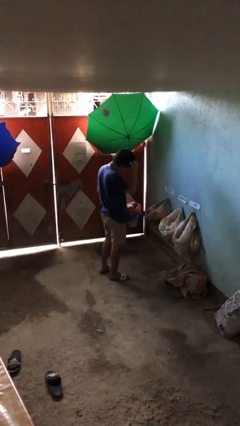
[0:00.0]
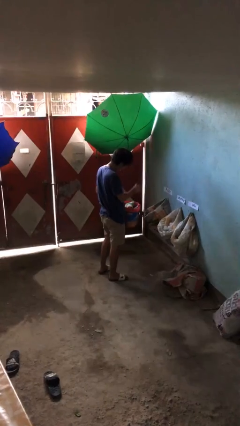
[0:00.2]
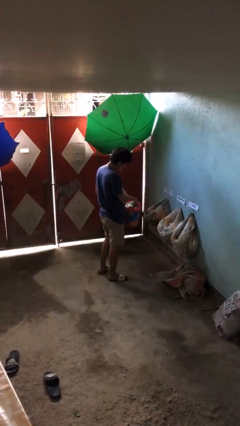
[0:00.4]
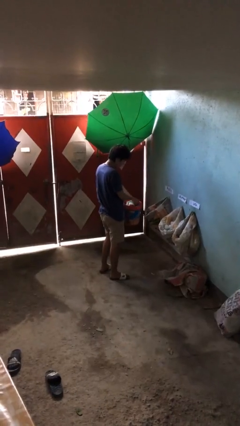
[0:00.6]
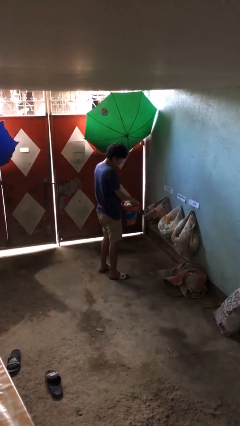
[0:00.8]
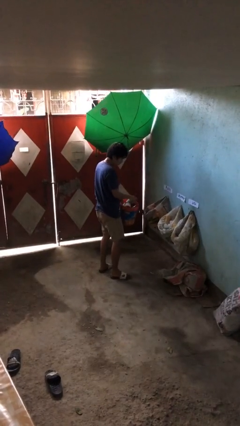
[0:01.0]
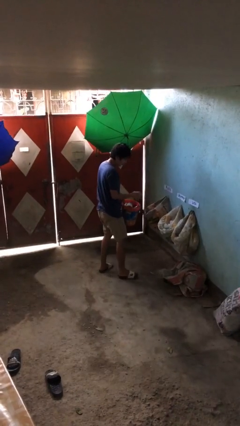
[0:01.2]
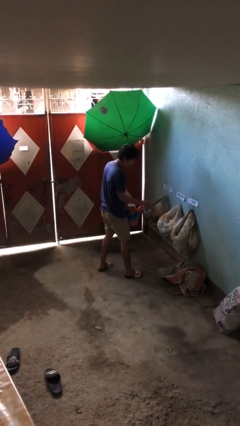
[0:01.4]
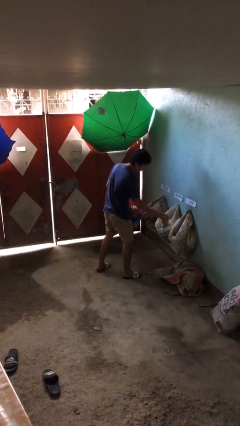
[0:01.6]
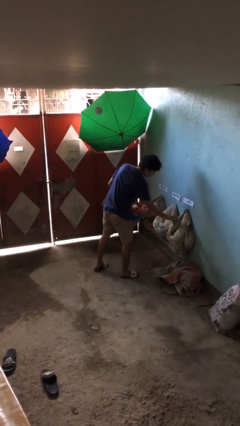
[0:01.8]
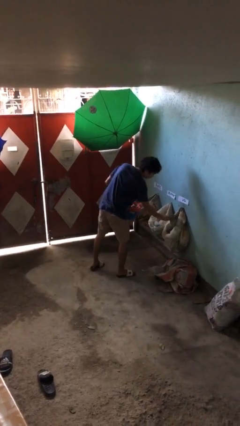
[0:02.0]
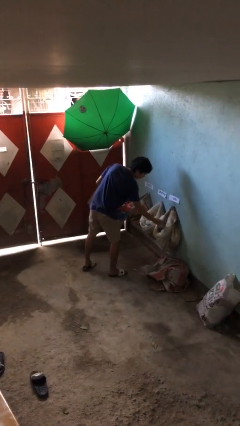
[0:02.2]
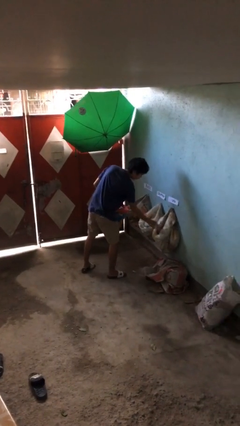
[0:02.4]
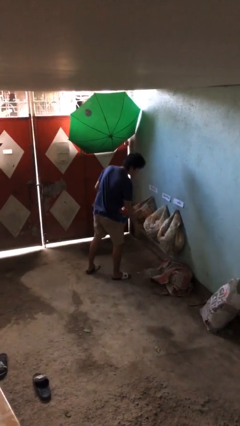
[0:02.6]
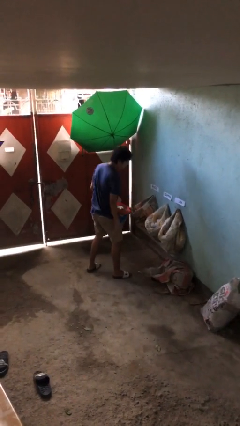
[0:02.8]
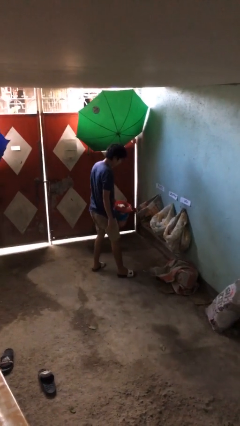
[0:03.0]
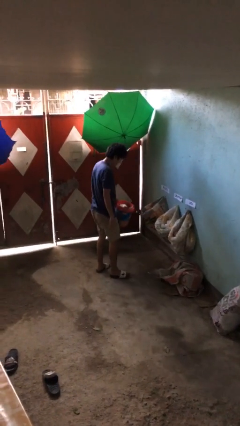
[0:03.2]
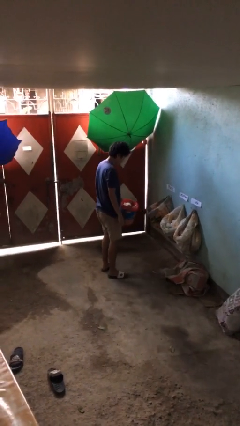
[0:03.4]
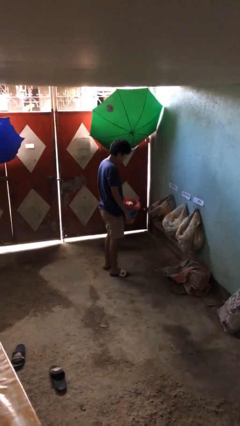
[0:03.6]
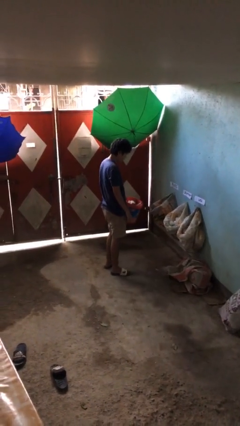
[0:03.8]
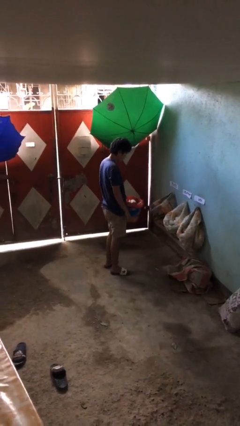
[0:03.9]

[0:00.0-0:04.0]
person discards trash

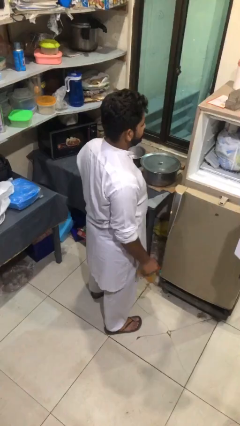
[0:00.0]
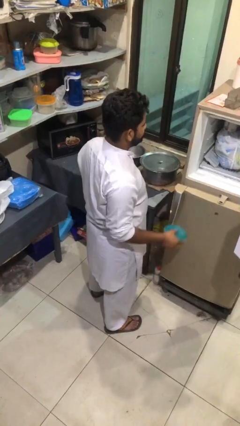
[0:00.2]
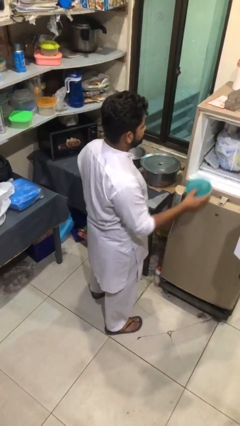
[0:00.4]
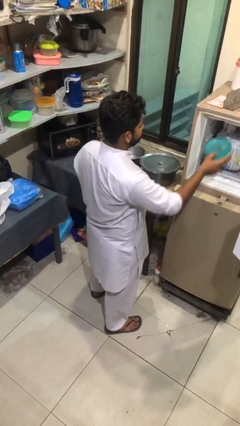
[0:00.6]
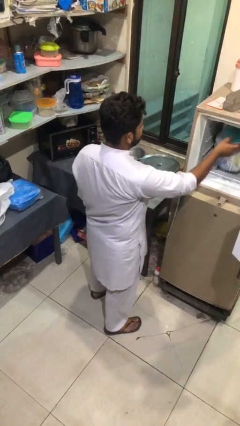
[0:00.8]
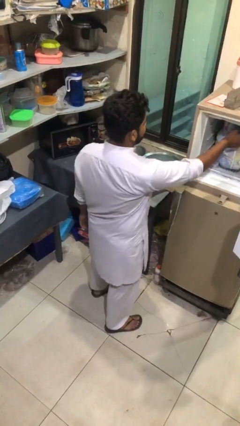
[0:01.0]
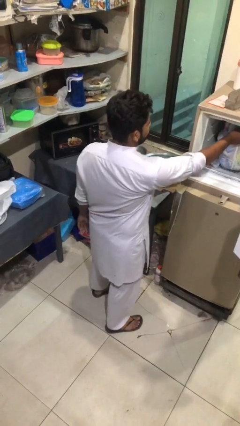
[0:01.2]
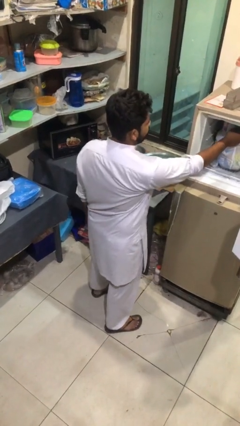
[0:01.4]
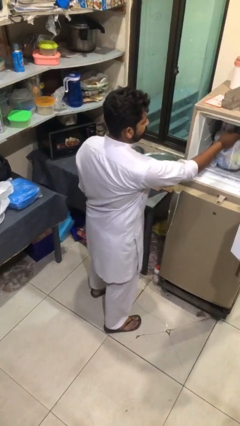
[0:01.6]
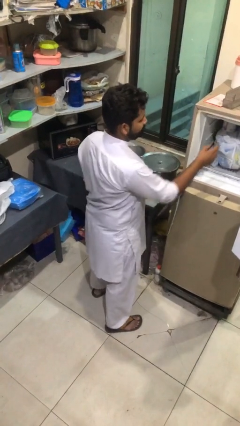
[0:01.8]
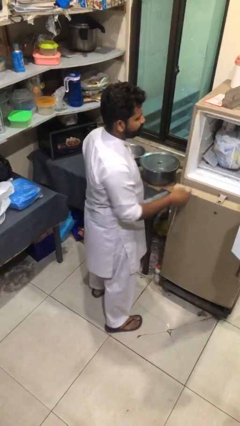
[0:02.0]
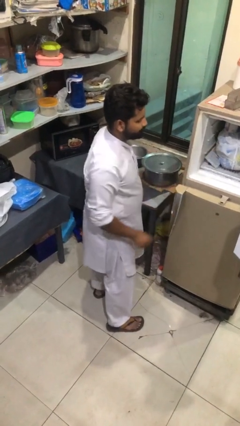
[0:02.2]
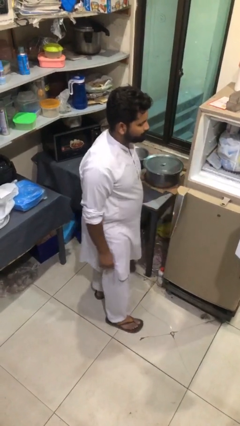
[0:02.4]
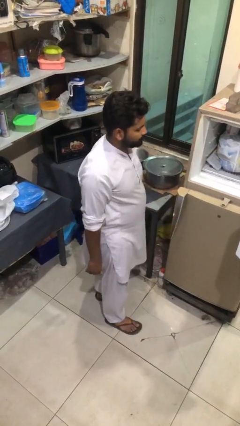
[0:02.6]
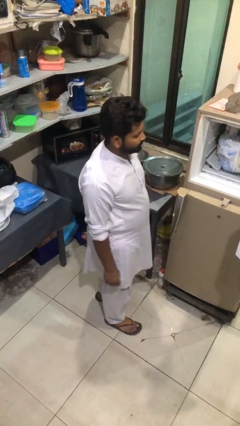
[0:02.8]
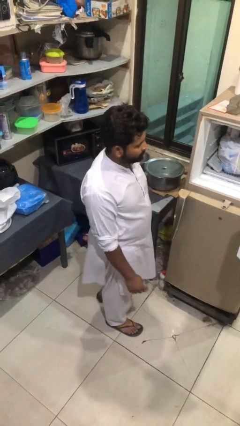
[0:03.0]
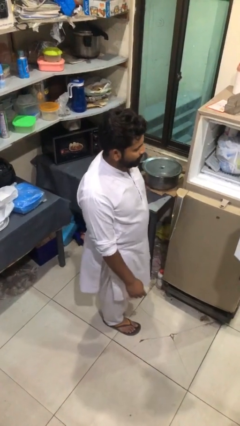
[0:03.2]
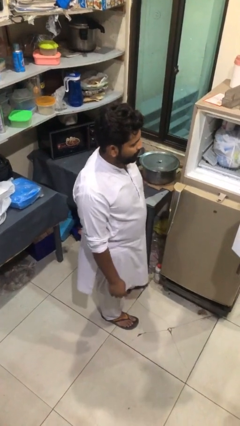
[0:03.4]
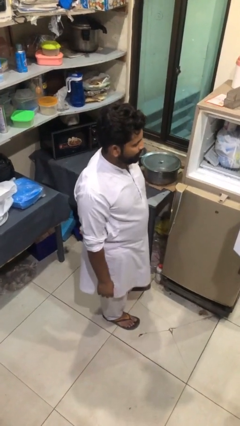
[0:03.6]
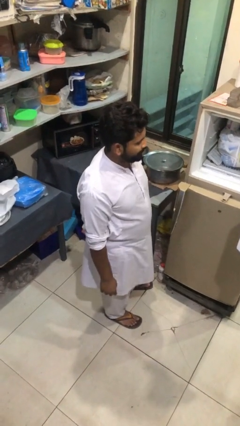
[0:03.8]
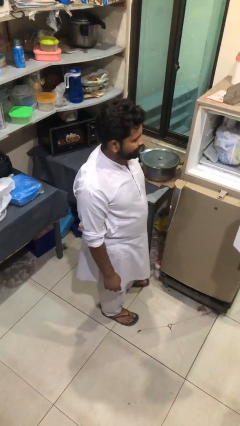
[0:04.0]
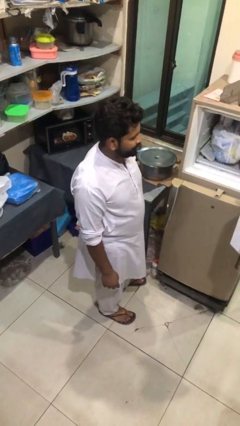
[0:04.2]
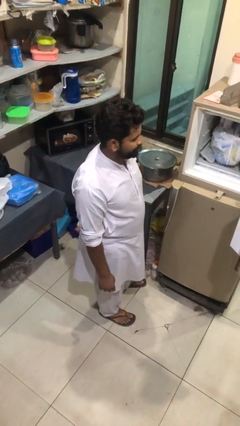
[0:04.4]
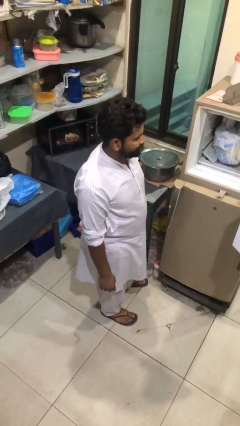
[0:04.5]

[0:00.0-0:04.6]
person puts object into refrigerator

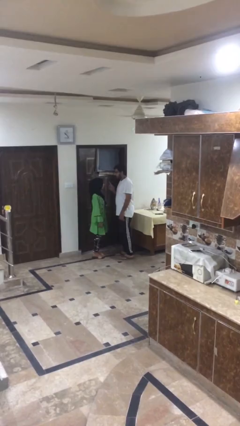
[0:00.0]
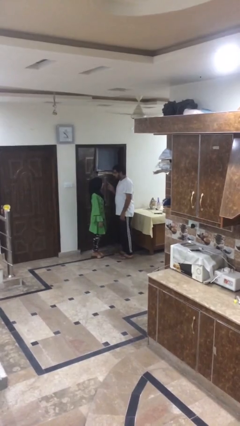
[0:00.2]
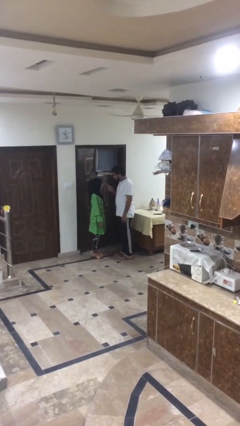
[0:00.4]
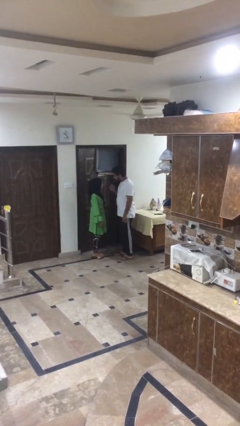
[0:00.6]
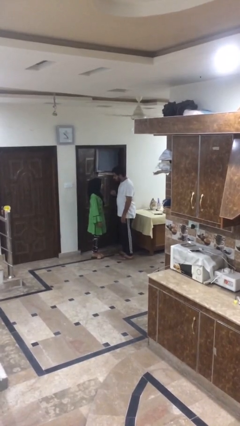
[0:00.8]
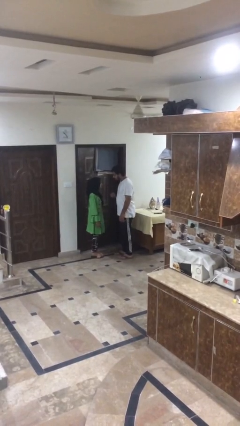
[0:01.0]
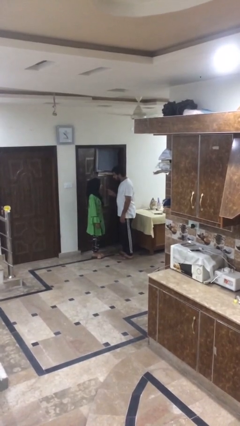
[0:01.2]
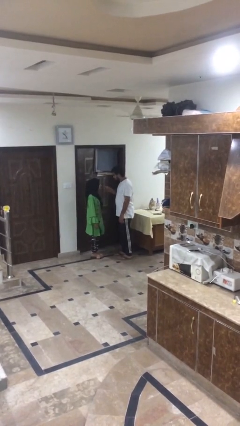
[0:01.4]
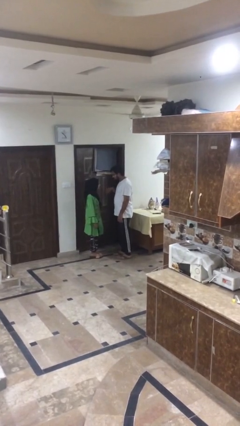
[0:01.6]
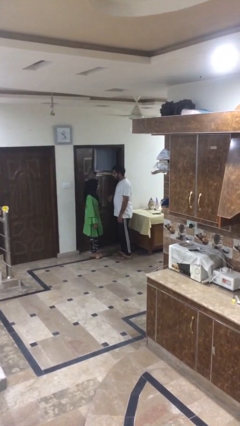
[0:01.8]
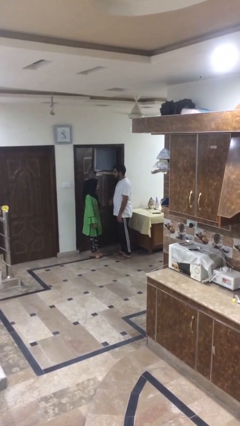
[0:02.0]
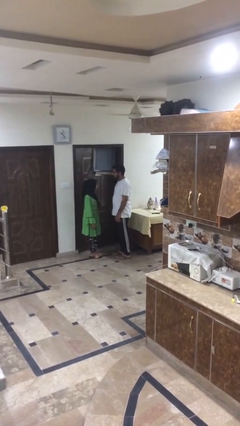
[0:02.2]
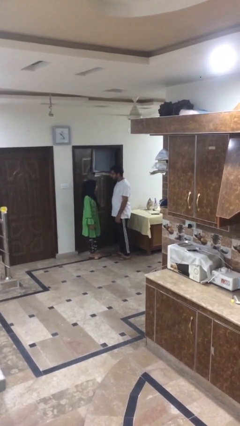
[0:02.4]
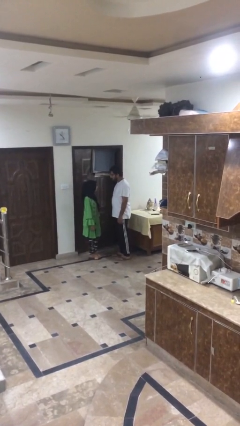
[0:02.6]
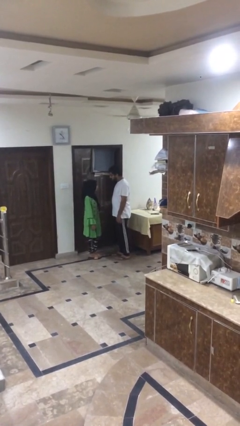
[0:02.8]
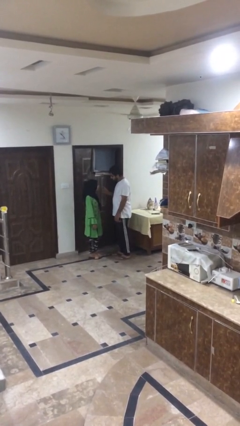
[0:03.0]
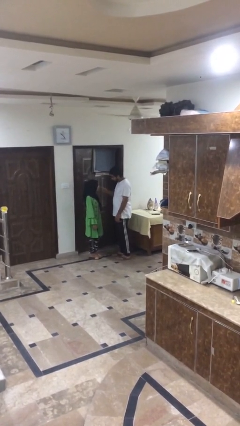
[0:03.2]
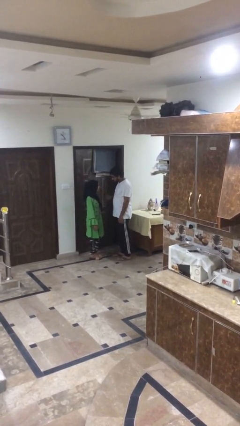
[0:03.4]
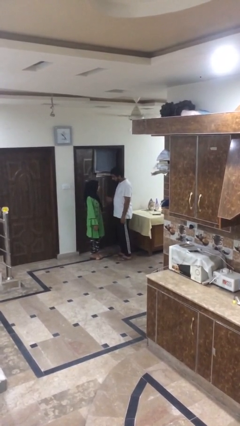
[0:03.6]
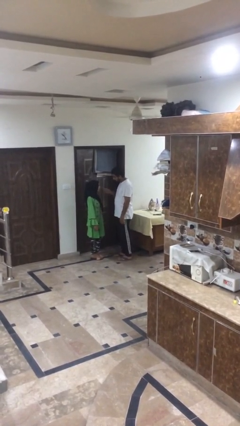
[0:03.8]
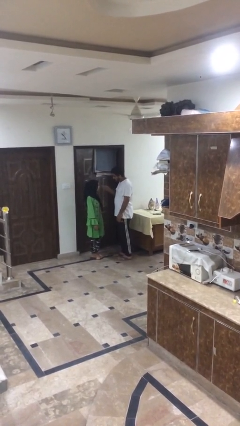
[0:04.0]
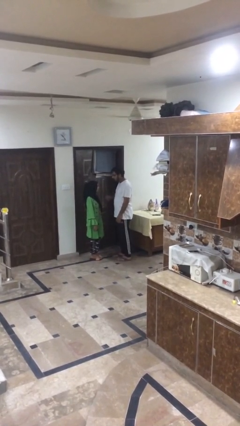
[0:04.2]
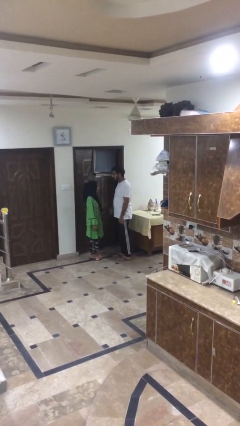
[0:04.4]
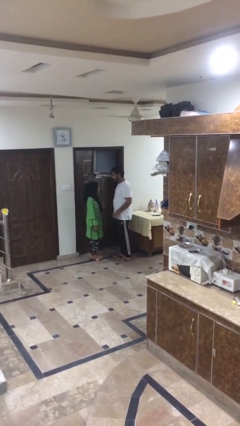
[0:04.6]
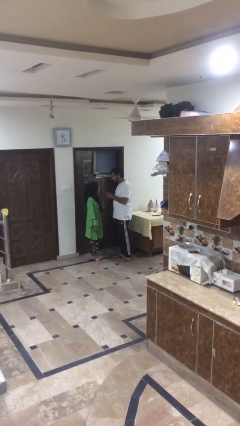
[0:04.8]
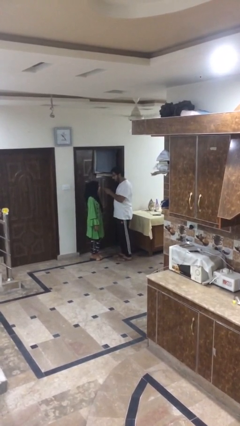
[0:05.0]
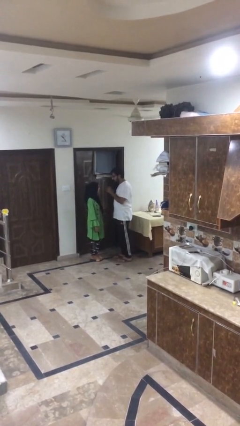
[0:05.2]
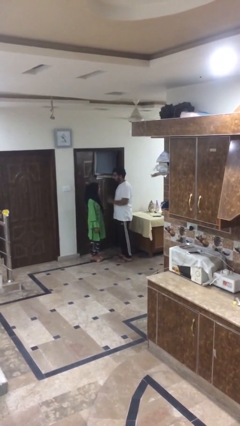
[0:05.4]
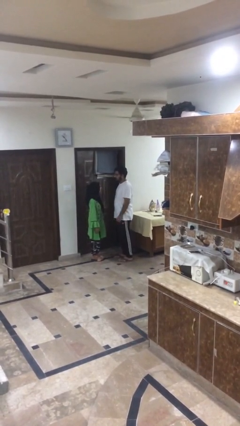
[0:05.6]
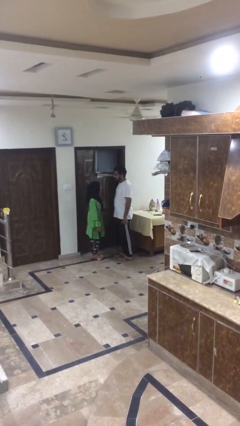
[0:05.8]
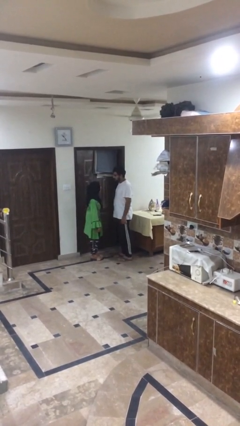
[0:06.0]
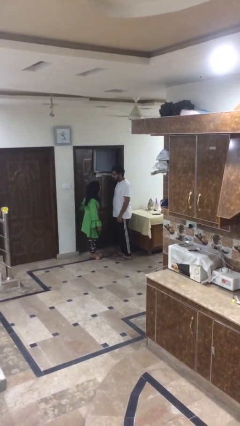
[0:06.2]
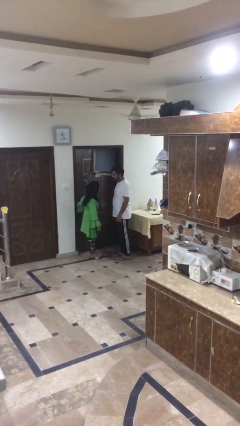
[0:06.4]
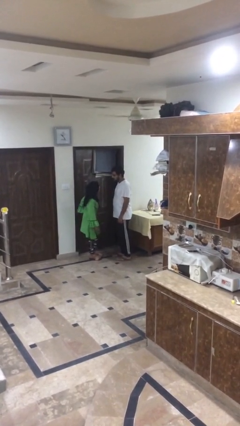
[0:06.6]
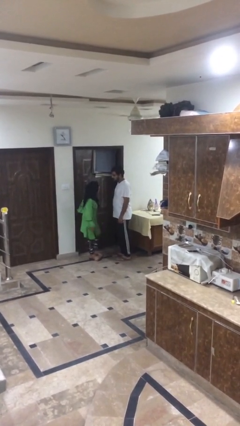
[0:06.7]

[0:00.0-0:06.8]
person talks to person

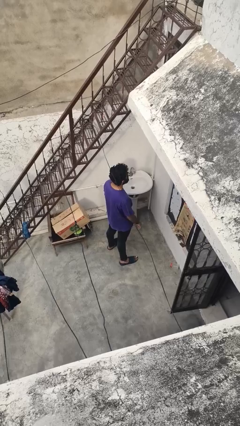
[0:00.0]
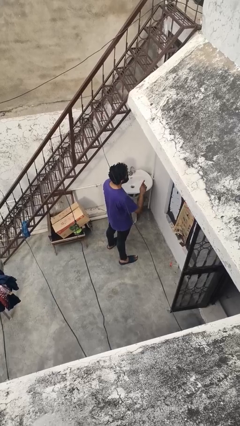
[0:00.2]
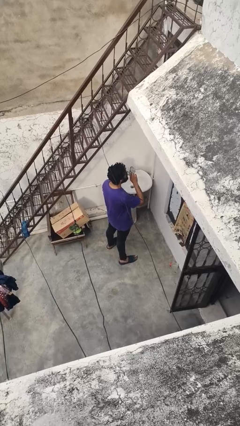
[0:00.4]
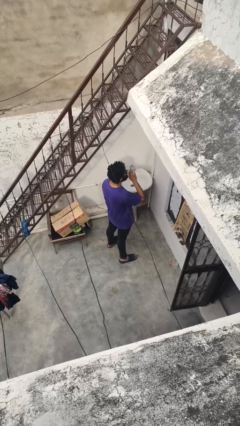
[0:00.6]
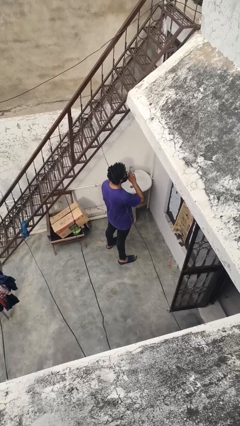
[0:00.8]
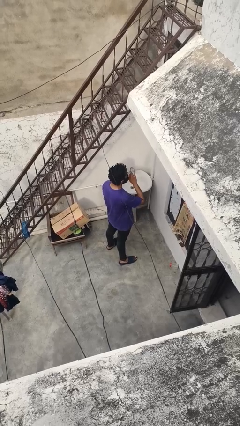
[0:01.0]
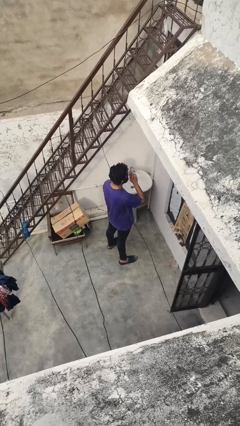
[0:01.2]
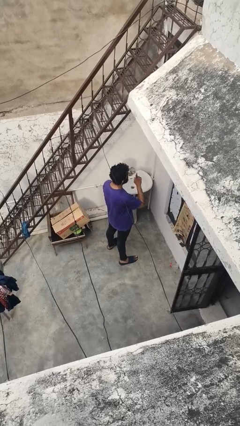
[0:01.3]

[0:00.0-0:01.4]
person gestures be quiet

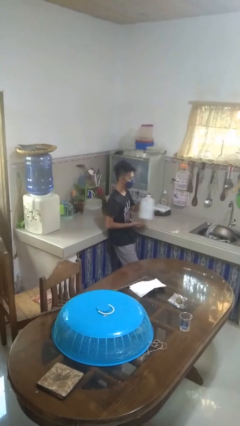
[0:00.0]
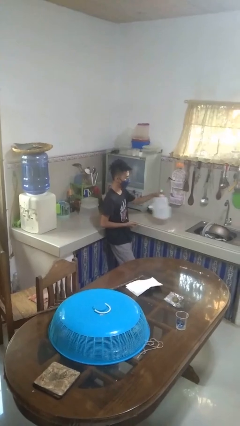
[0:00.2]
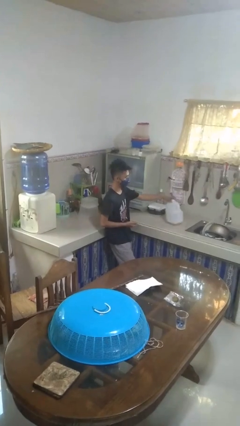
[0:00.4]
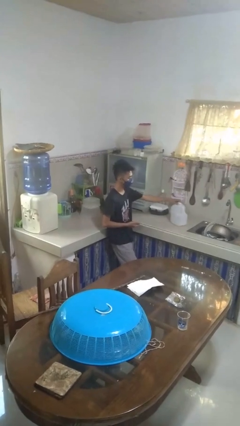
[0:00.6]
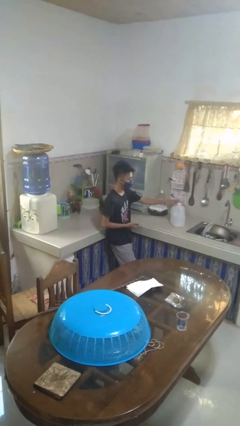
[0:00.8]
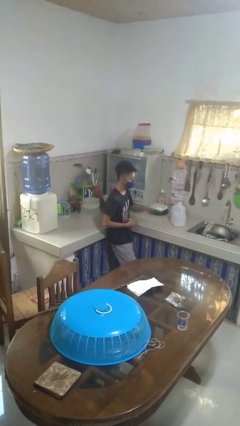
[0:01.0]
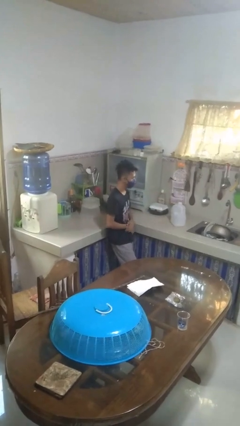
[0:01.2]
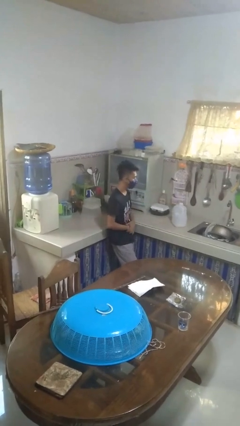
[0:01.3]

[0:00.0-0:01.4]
person puts down object on countertop
